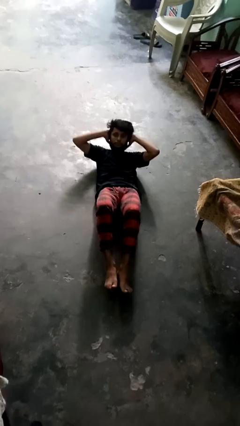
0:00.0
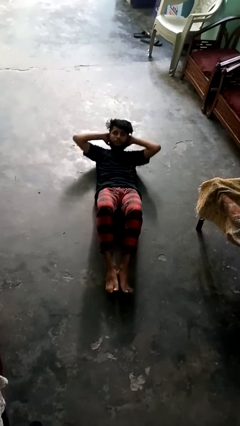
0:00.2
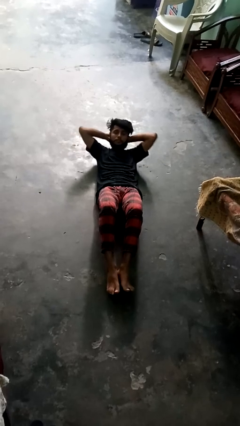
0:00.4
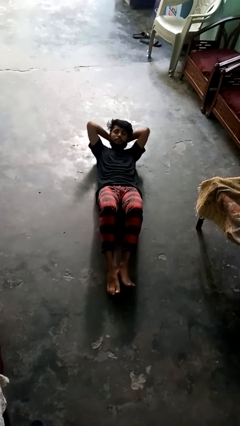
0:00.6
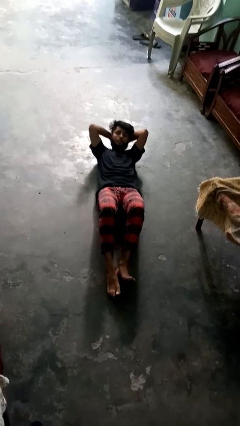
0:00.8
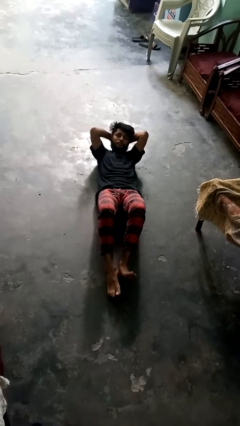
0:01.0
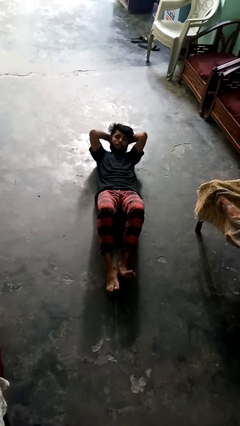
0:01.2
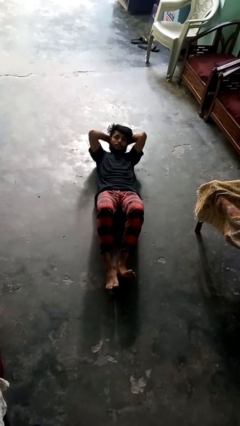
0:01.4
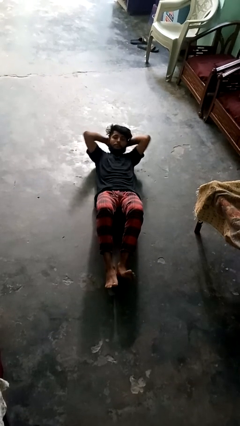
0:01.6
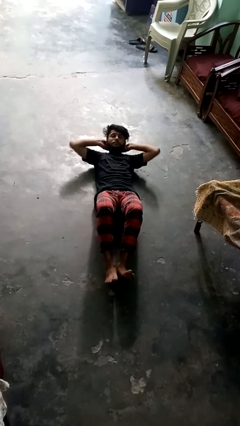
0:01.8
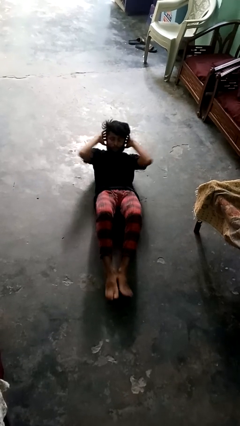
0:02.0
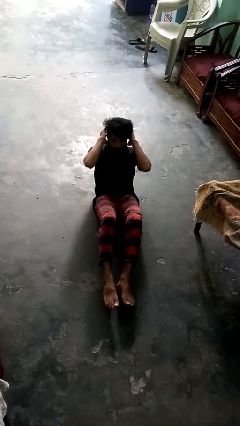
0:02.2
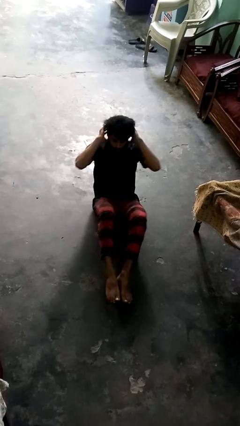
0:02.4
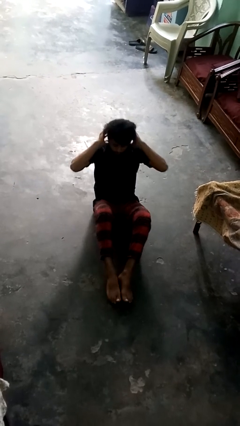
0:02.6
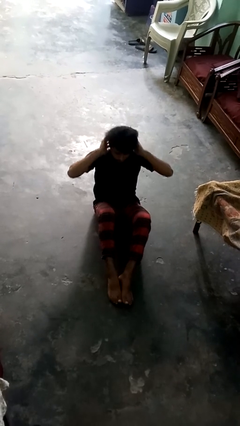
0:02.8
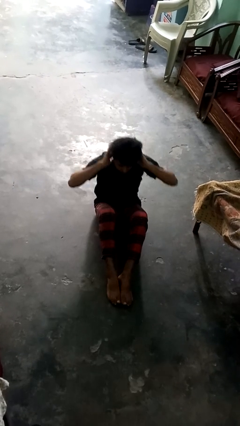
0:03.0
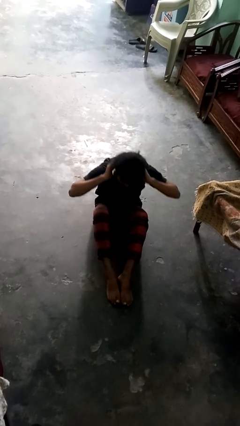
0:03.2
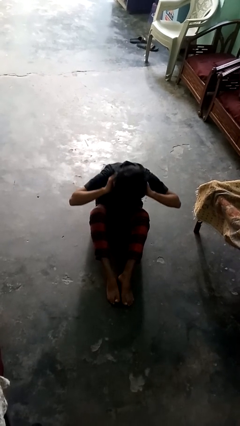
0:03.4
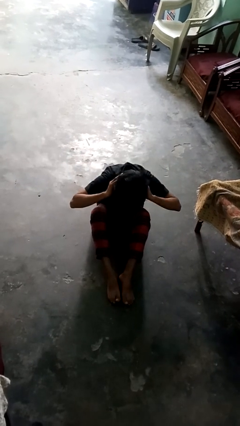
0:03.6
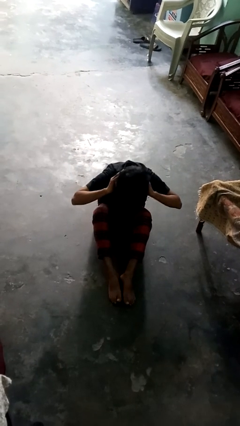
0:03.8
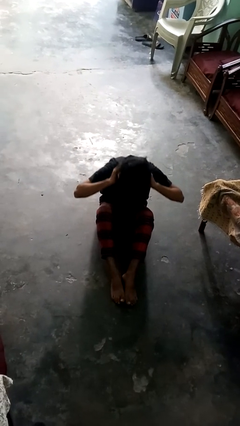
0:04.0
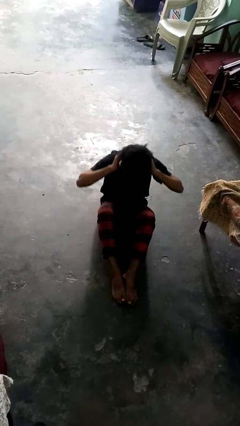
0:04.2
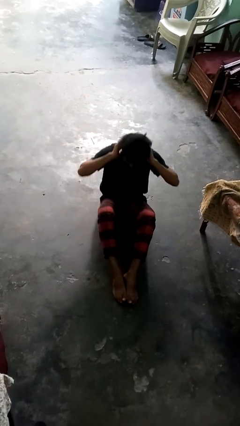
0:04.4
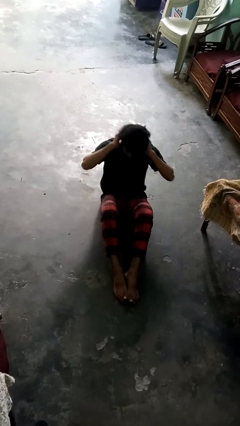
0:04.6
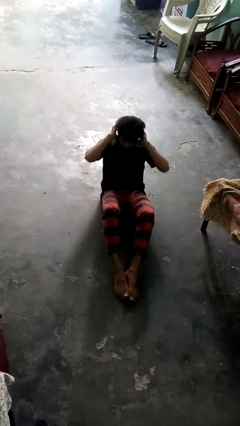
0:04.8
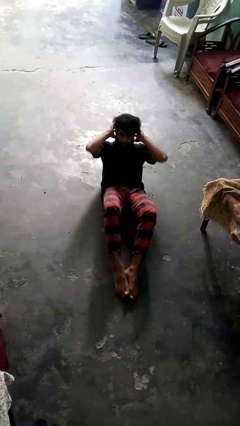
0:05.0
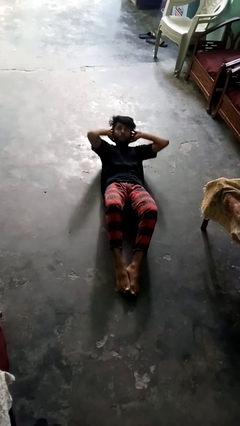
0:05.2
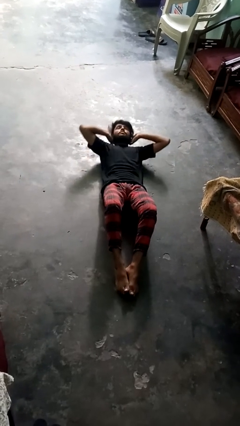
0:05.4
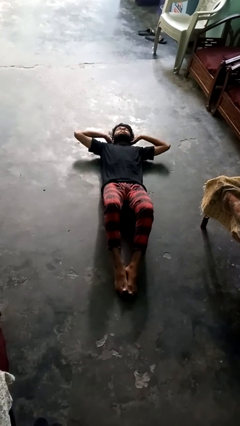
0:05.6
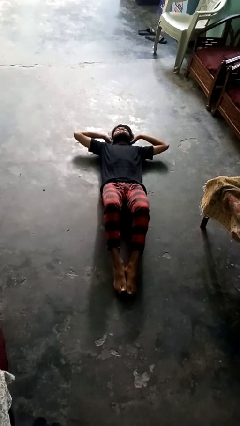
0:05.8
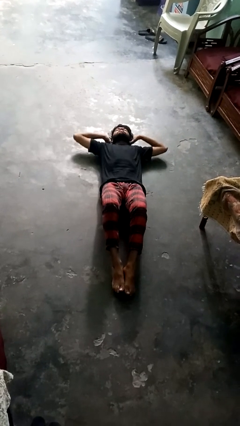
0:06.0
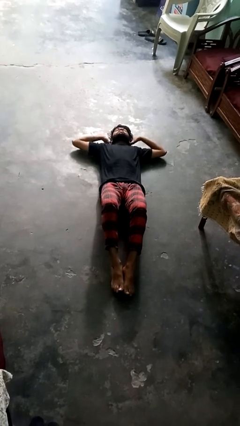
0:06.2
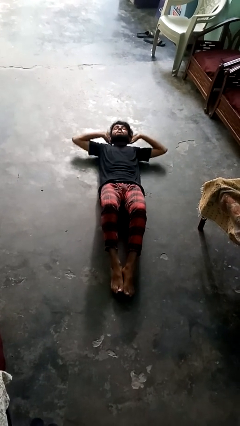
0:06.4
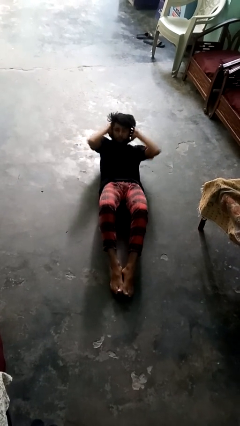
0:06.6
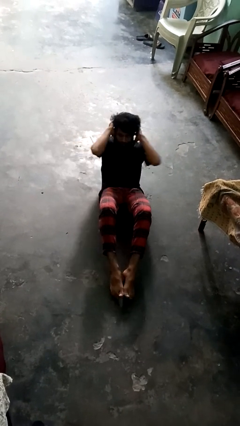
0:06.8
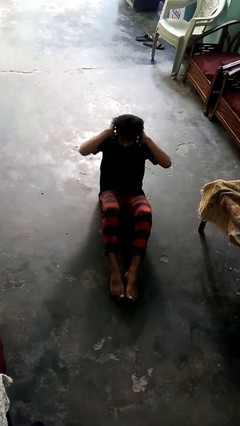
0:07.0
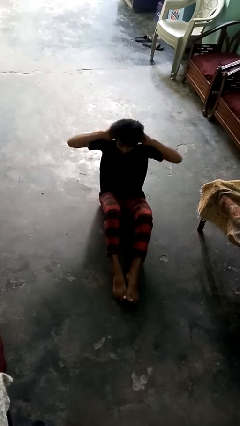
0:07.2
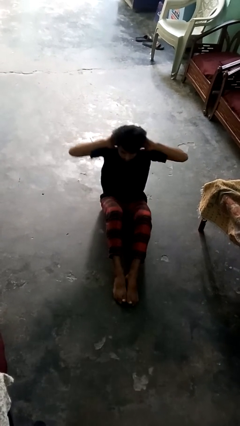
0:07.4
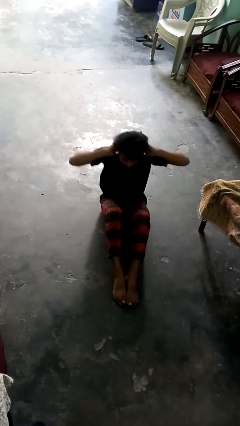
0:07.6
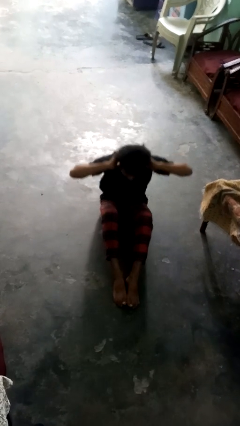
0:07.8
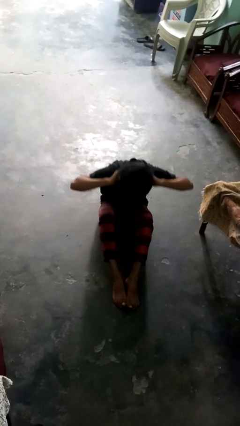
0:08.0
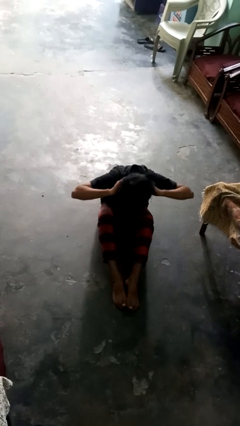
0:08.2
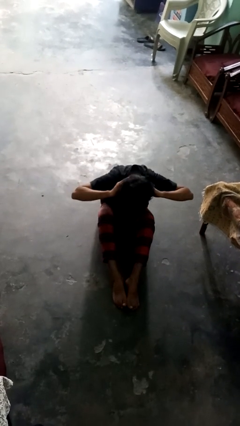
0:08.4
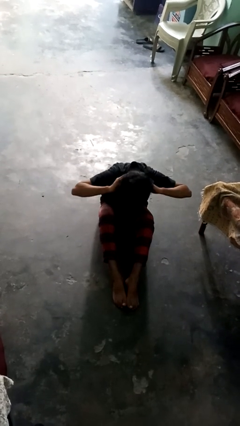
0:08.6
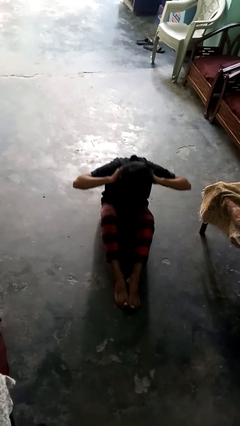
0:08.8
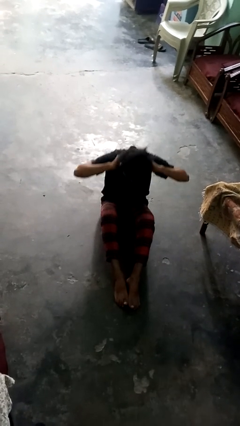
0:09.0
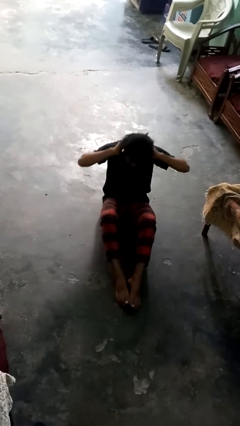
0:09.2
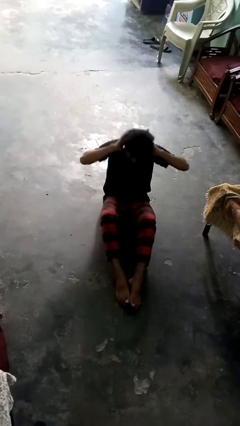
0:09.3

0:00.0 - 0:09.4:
person exercises with situp

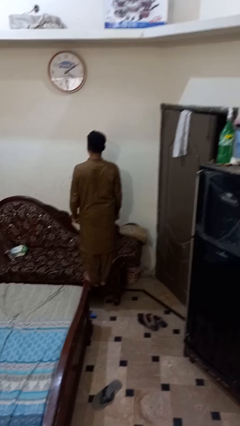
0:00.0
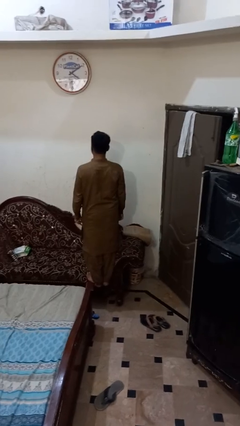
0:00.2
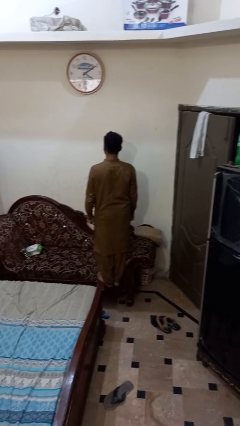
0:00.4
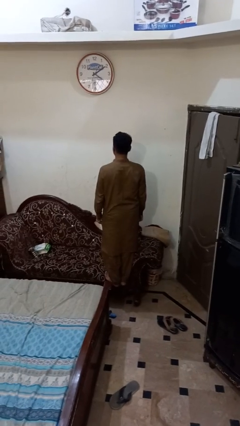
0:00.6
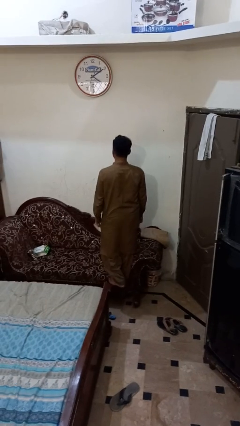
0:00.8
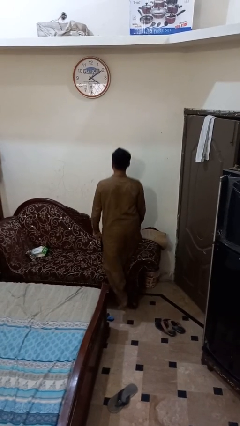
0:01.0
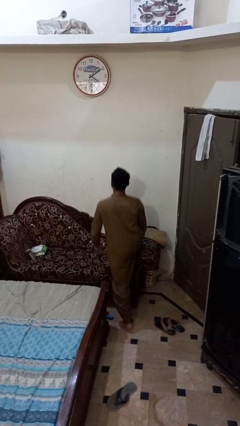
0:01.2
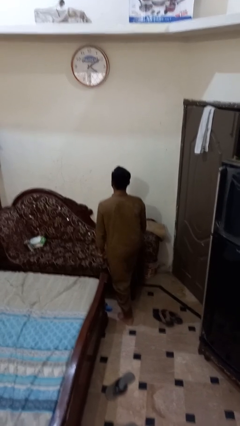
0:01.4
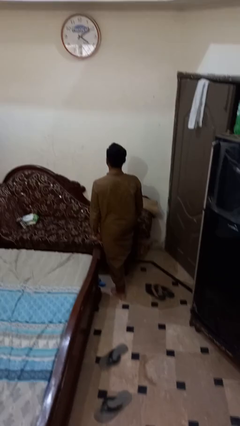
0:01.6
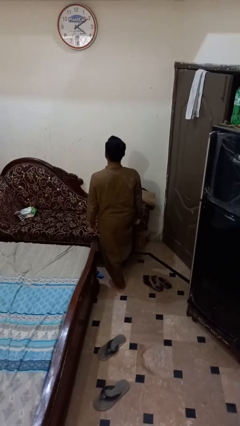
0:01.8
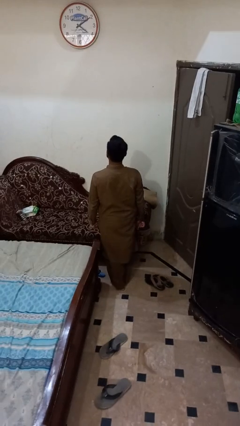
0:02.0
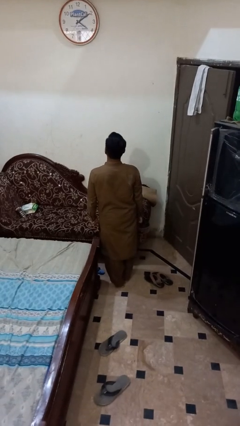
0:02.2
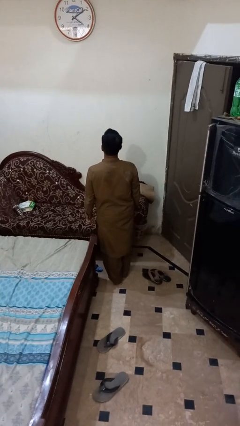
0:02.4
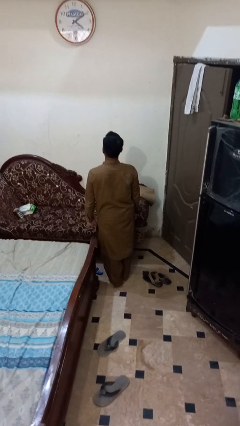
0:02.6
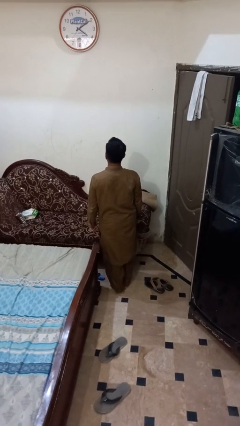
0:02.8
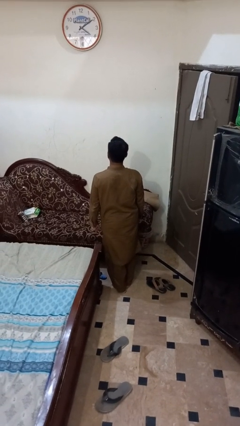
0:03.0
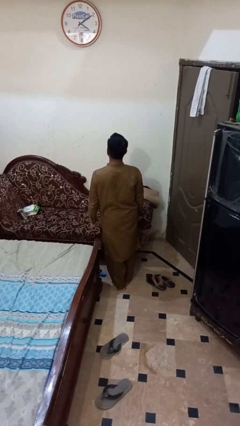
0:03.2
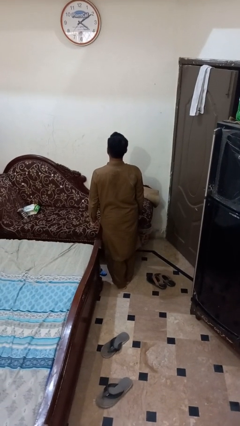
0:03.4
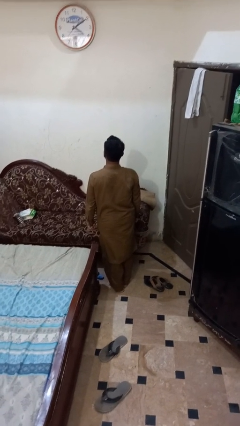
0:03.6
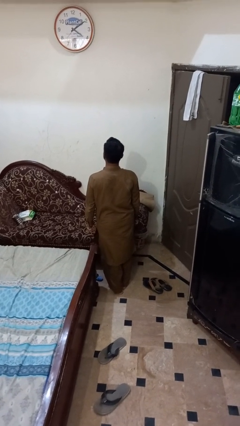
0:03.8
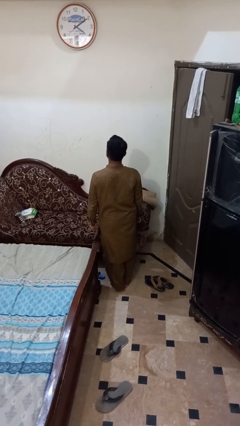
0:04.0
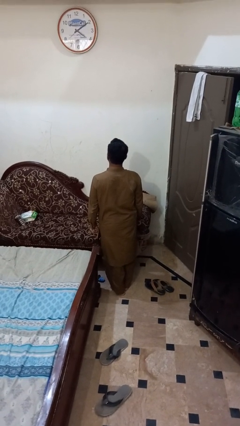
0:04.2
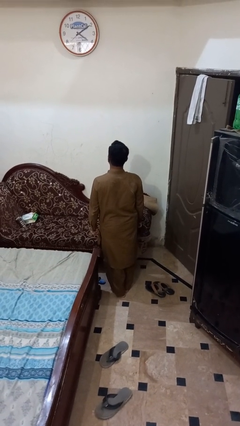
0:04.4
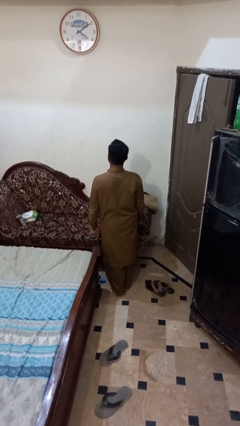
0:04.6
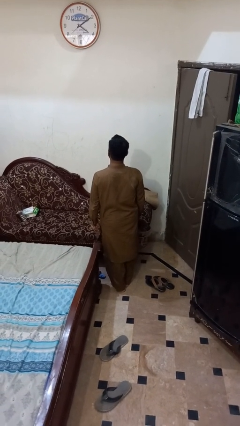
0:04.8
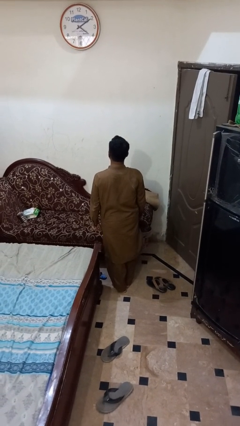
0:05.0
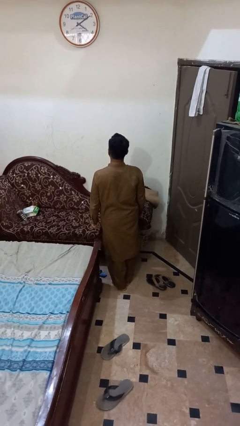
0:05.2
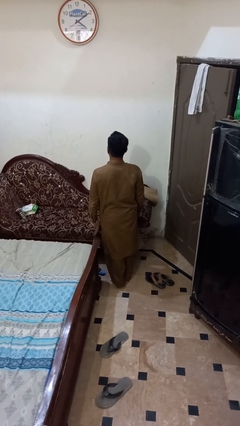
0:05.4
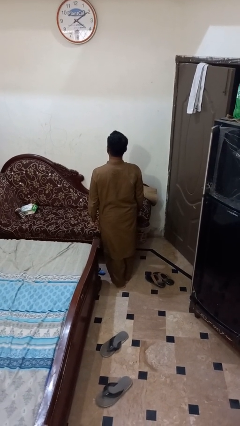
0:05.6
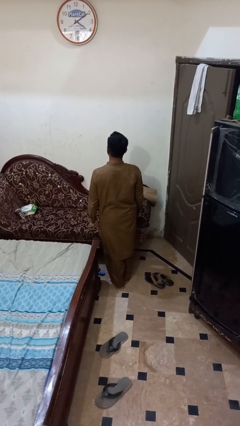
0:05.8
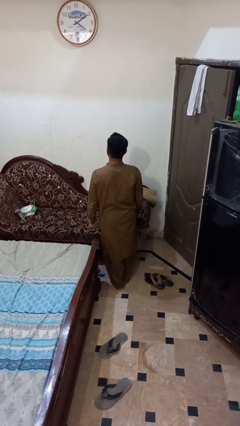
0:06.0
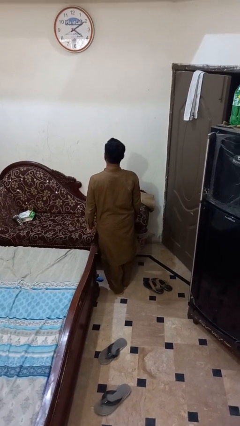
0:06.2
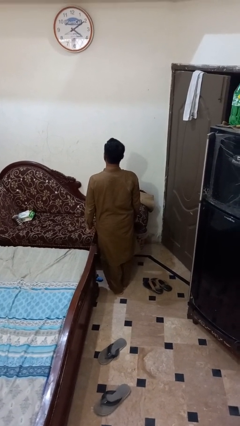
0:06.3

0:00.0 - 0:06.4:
person climbs off couch

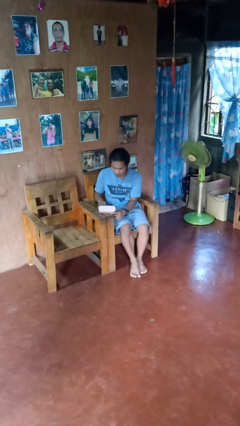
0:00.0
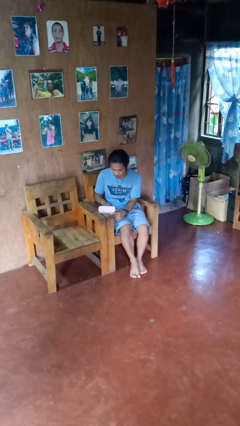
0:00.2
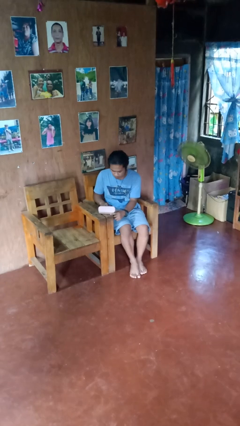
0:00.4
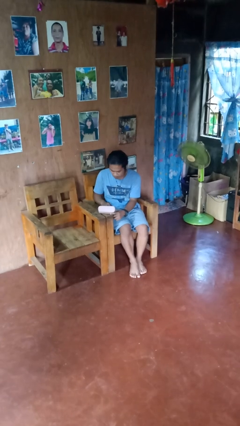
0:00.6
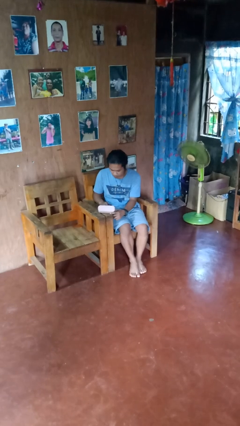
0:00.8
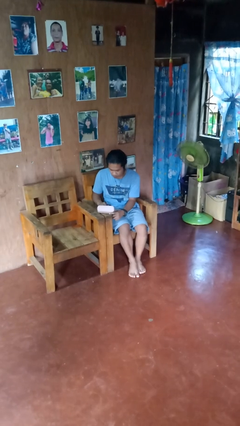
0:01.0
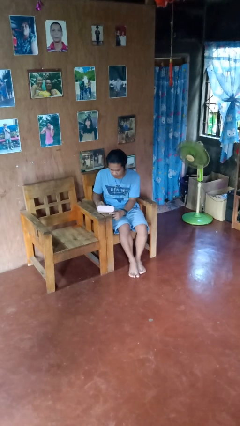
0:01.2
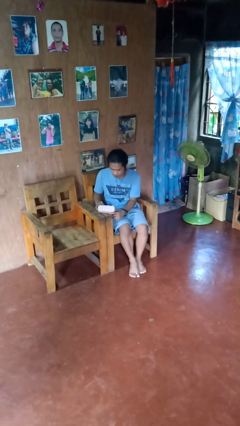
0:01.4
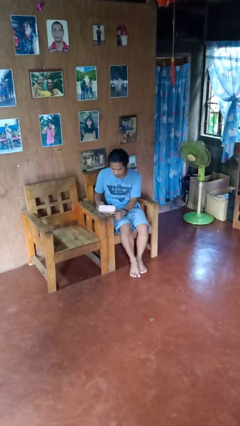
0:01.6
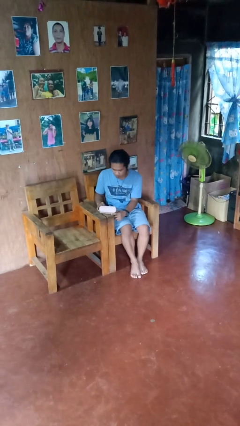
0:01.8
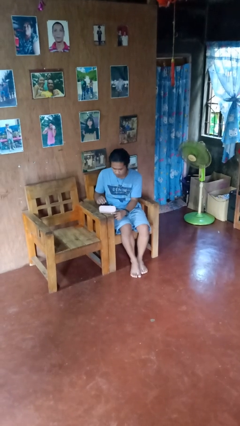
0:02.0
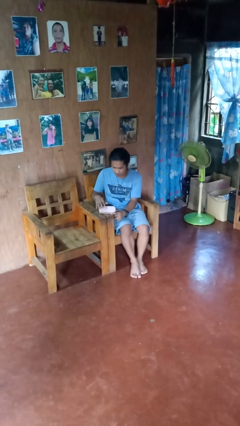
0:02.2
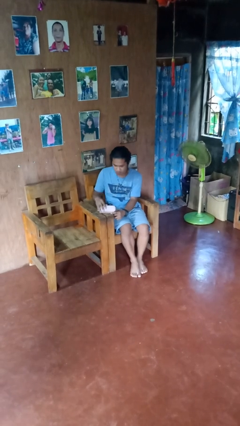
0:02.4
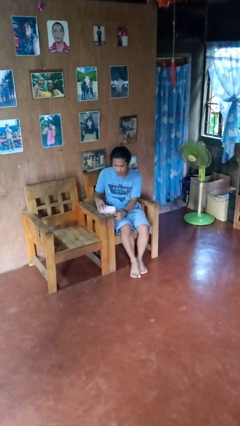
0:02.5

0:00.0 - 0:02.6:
person searches jewelry box
